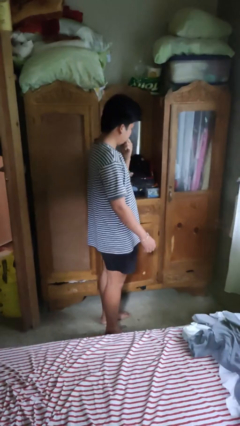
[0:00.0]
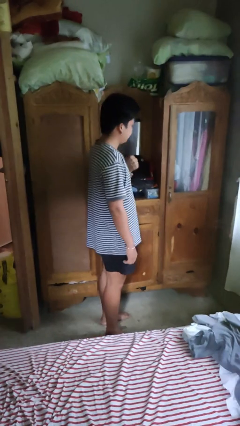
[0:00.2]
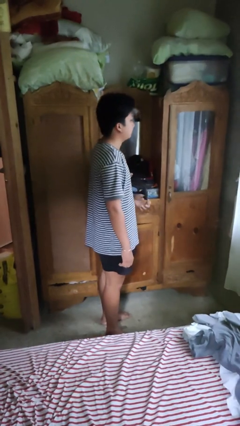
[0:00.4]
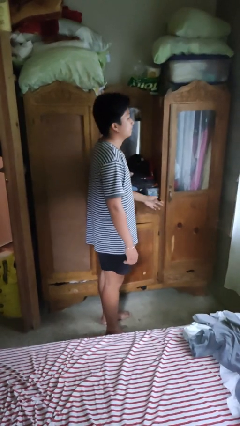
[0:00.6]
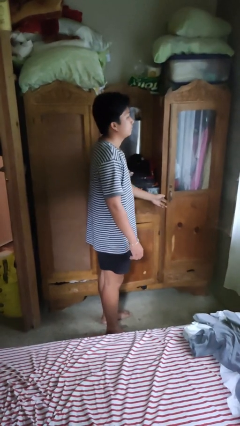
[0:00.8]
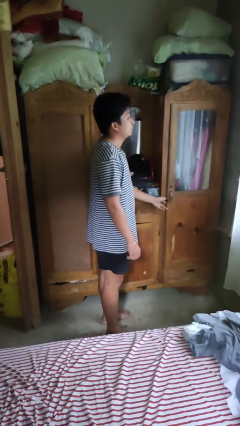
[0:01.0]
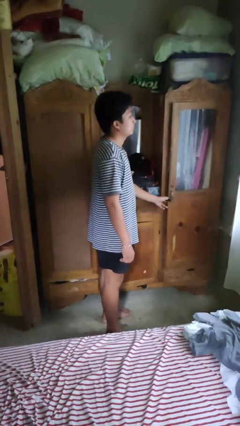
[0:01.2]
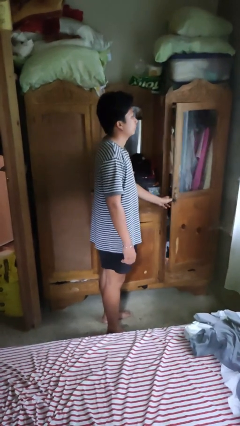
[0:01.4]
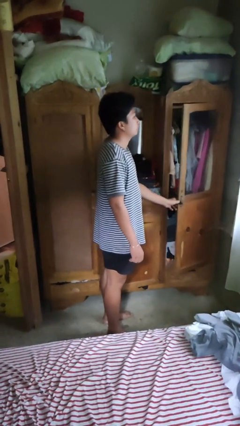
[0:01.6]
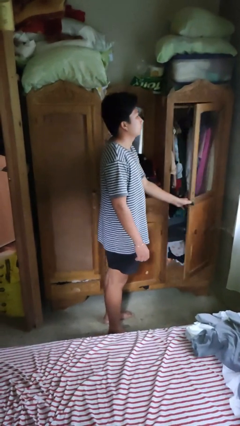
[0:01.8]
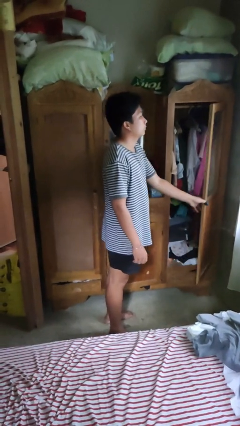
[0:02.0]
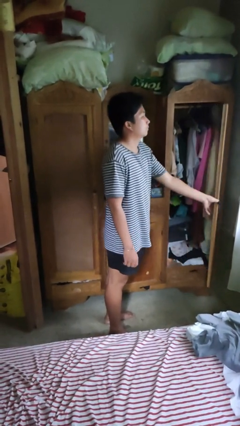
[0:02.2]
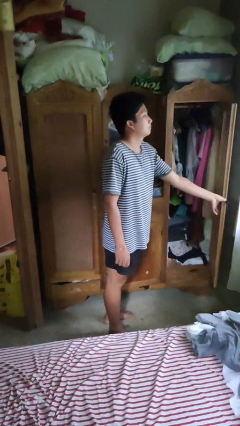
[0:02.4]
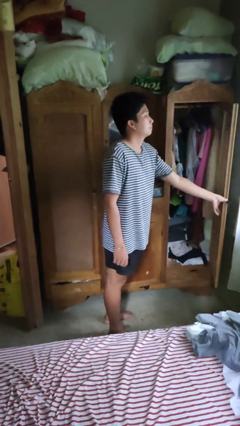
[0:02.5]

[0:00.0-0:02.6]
person opens closet door

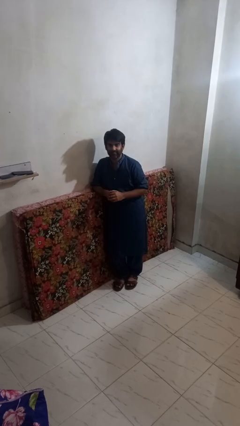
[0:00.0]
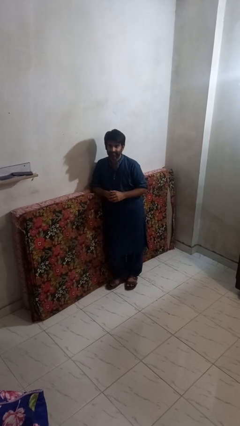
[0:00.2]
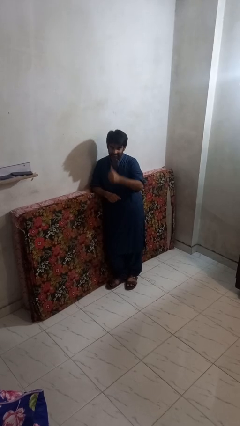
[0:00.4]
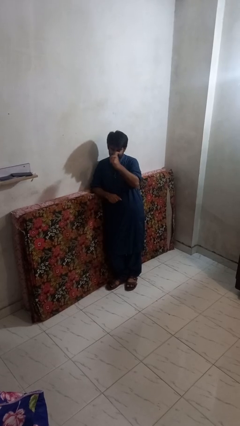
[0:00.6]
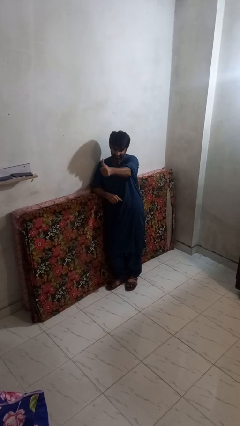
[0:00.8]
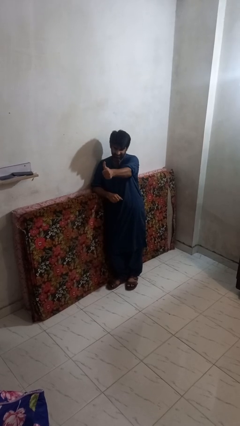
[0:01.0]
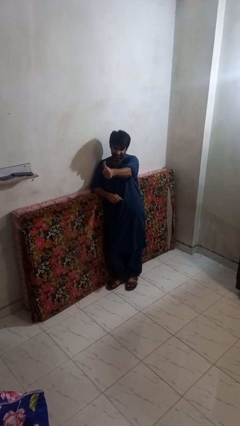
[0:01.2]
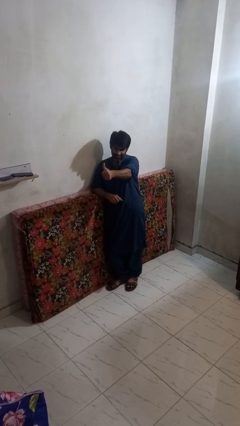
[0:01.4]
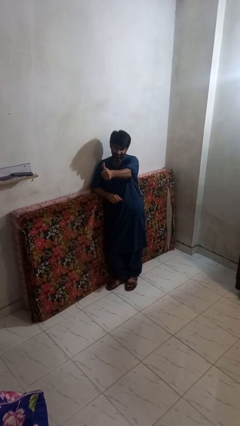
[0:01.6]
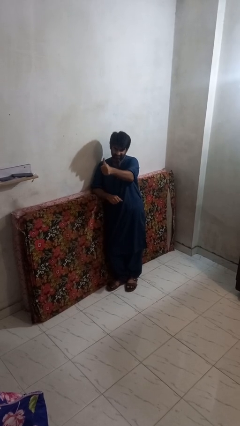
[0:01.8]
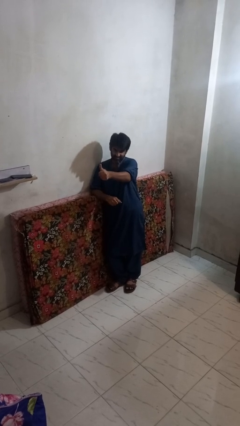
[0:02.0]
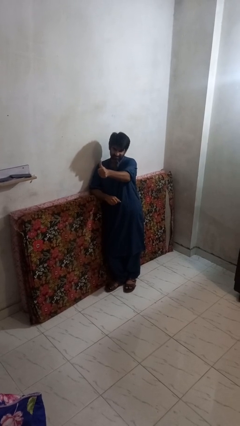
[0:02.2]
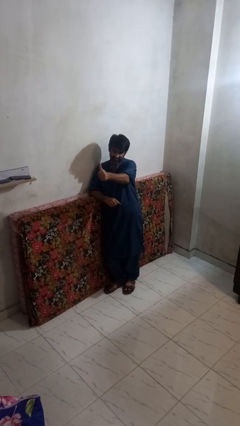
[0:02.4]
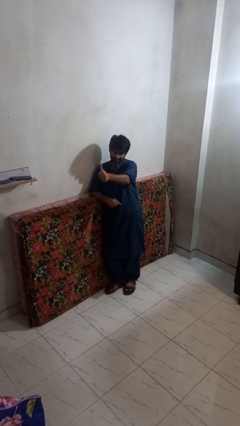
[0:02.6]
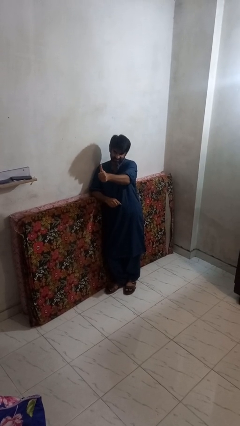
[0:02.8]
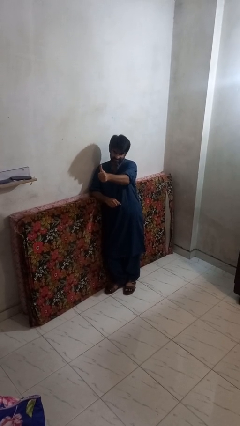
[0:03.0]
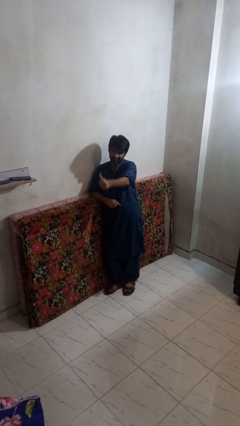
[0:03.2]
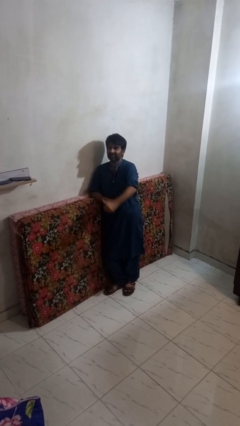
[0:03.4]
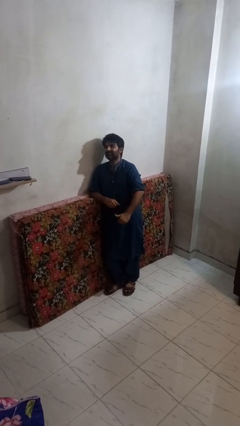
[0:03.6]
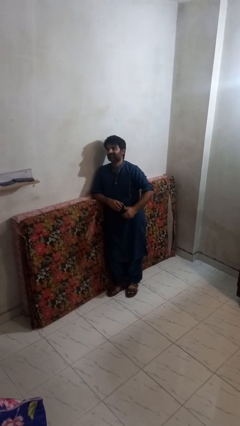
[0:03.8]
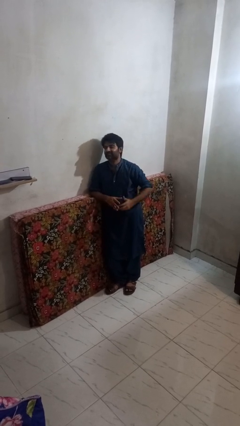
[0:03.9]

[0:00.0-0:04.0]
person gestures thumbs up

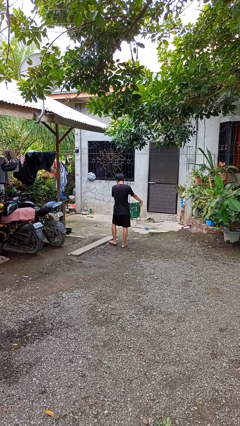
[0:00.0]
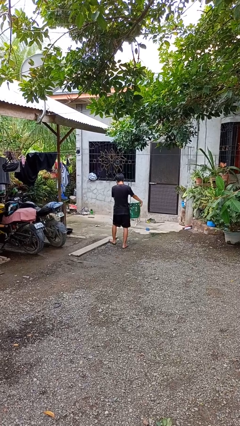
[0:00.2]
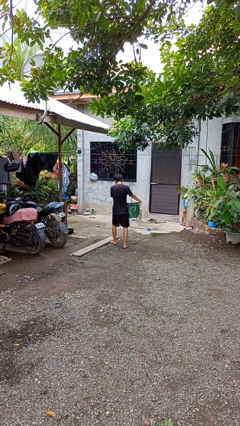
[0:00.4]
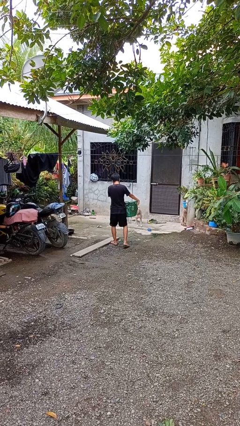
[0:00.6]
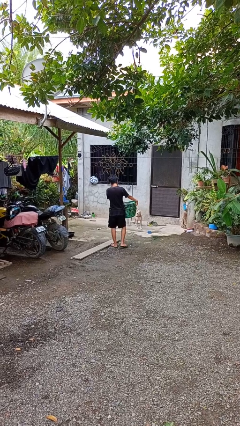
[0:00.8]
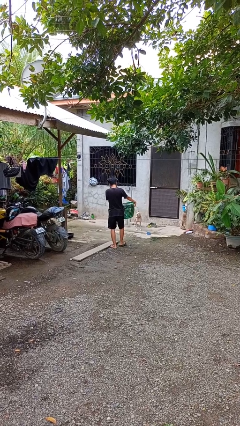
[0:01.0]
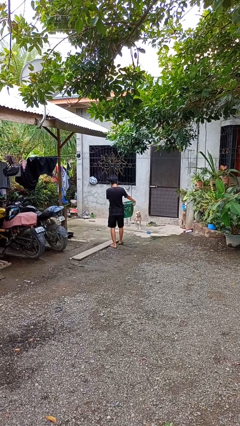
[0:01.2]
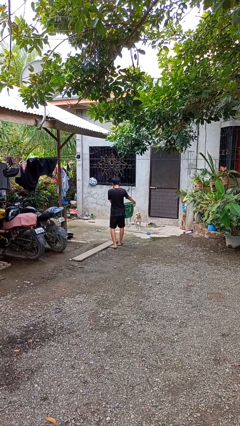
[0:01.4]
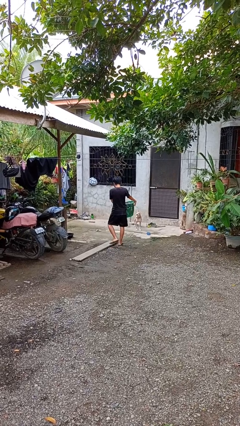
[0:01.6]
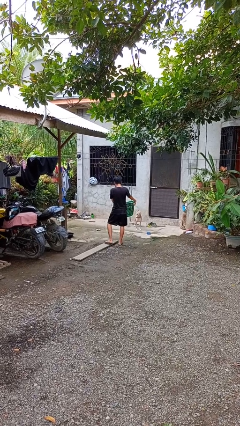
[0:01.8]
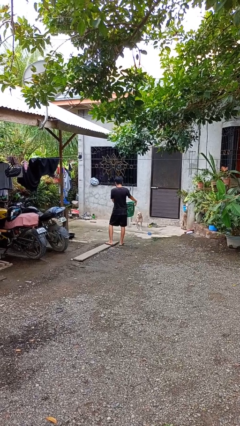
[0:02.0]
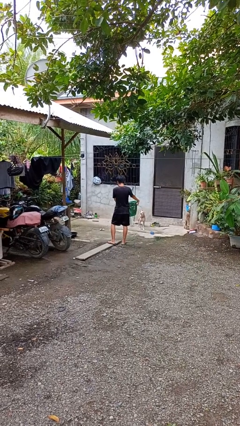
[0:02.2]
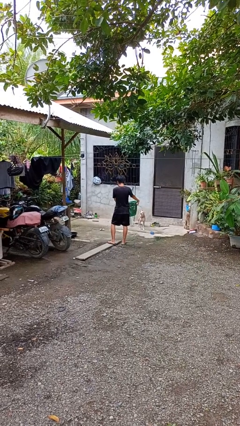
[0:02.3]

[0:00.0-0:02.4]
person carries laundry basket

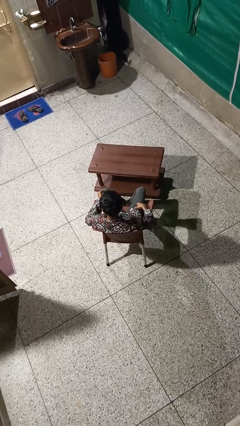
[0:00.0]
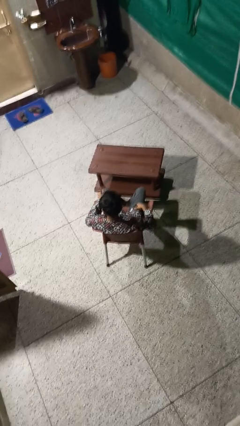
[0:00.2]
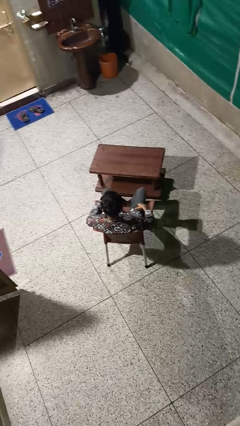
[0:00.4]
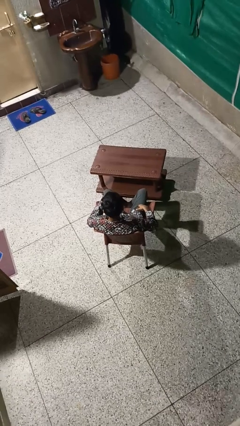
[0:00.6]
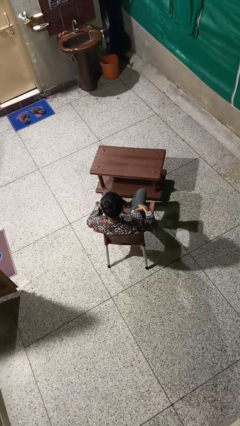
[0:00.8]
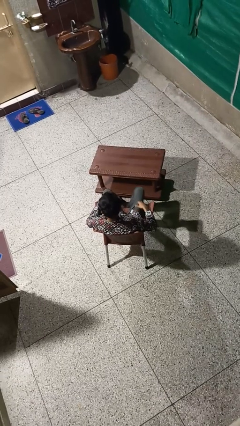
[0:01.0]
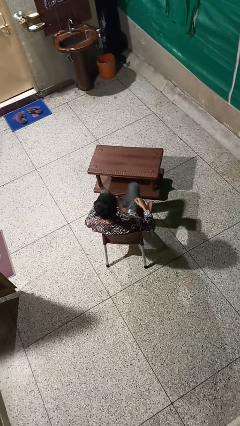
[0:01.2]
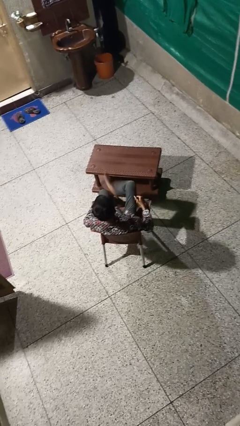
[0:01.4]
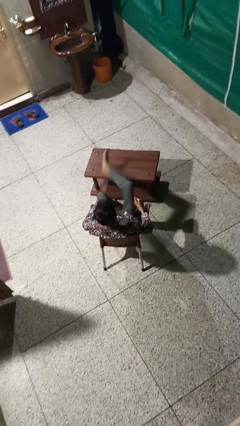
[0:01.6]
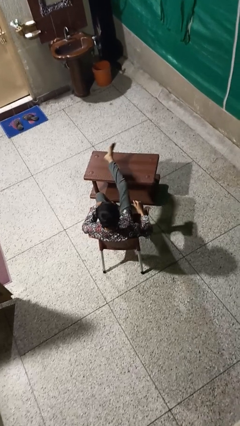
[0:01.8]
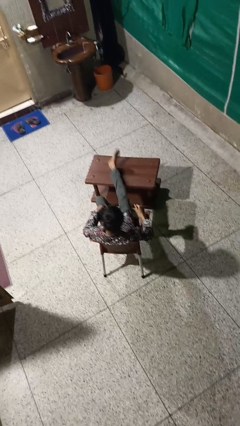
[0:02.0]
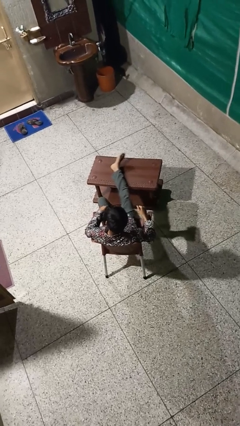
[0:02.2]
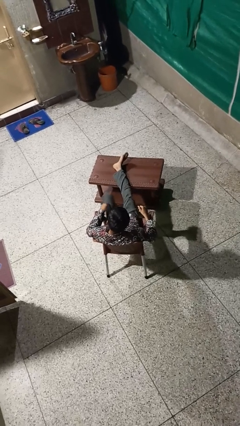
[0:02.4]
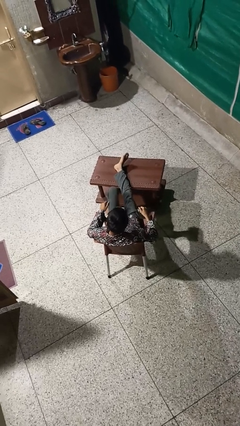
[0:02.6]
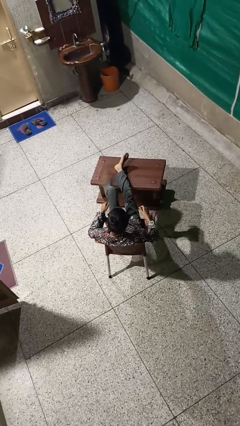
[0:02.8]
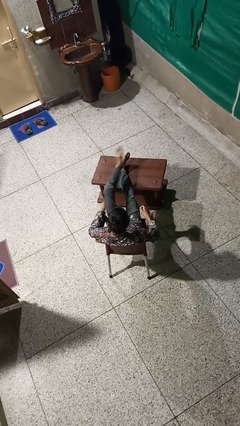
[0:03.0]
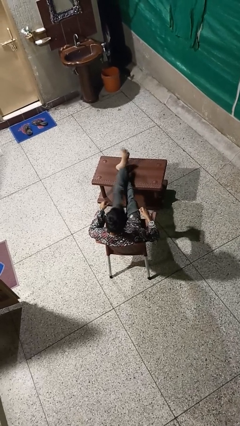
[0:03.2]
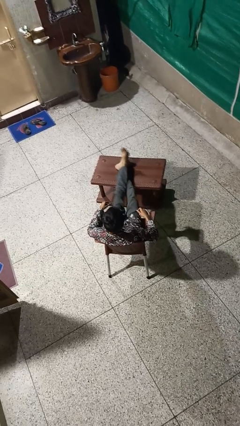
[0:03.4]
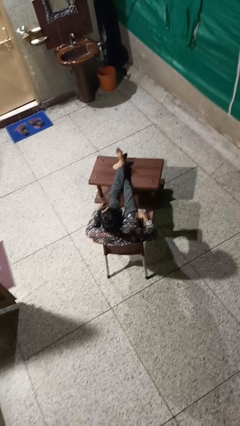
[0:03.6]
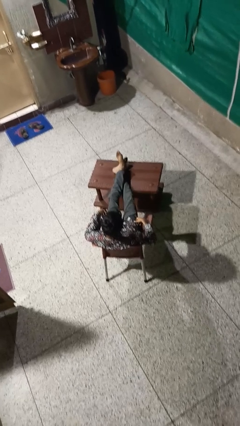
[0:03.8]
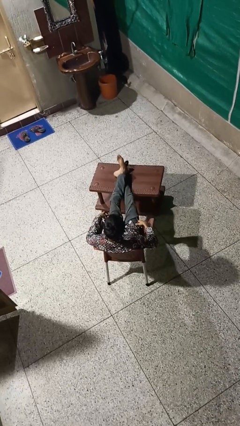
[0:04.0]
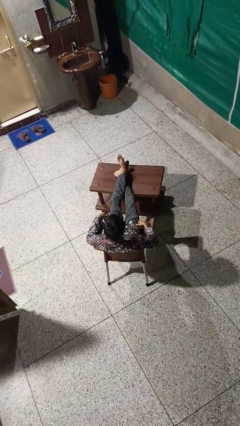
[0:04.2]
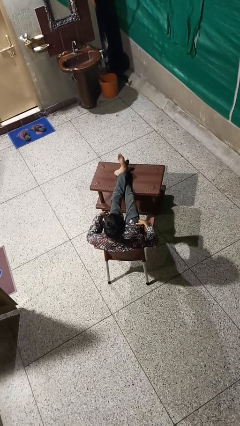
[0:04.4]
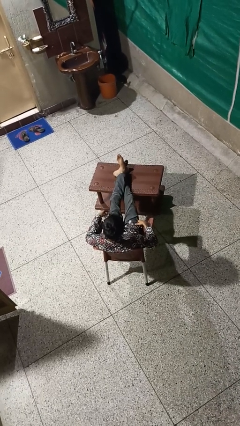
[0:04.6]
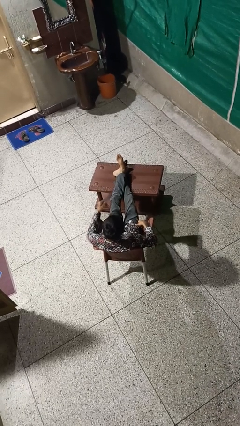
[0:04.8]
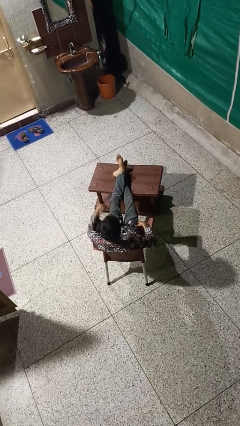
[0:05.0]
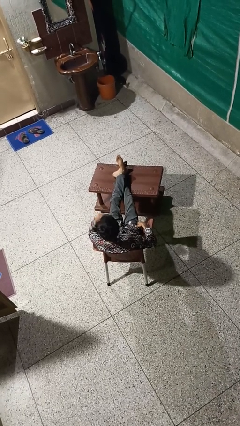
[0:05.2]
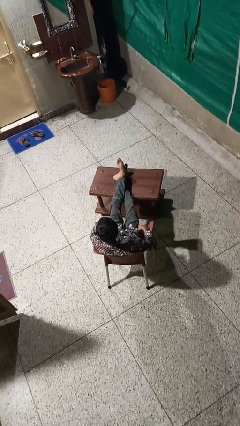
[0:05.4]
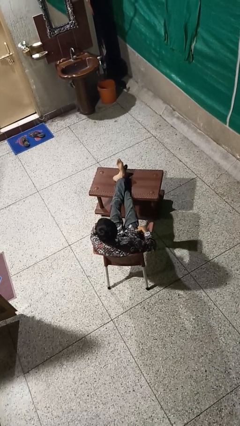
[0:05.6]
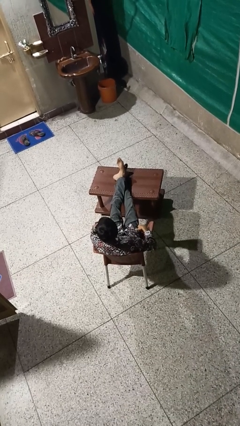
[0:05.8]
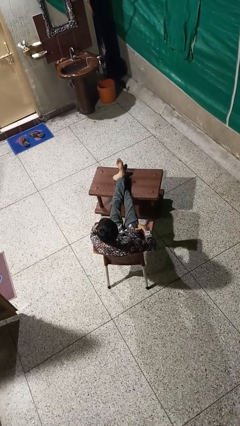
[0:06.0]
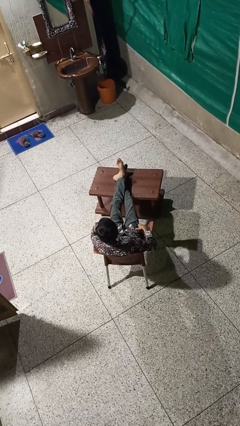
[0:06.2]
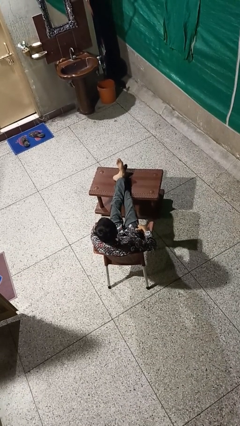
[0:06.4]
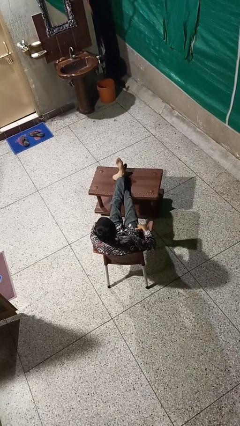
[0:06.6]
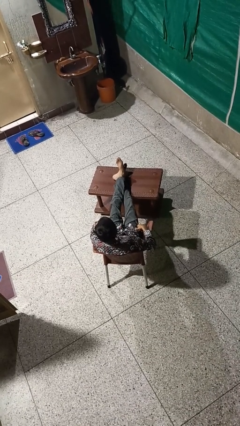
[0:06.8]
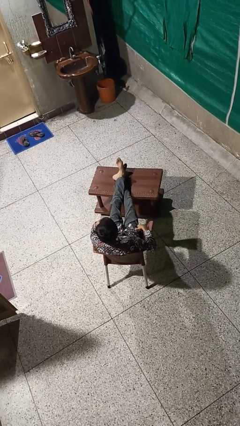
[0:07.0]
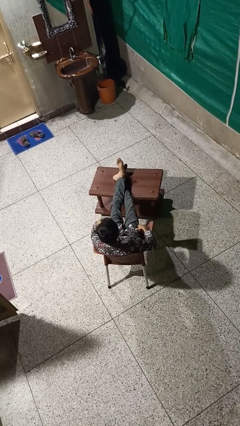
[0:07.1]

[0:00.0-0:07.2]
person puts feet up

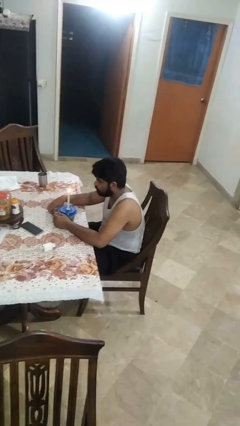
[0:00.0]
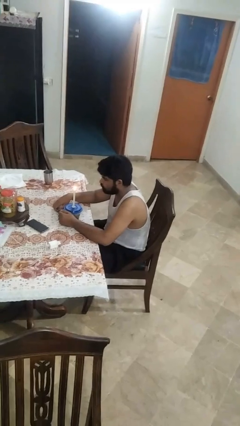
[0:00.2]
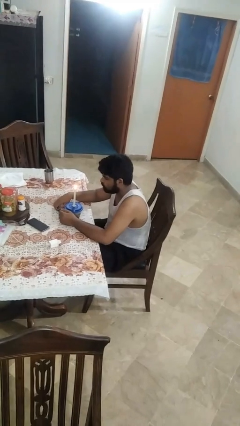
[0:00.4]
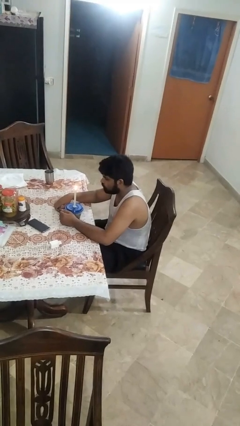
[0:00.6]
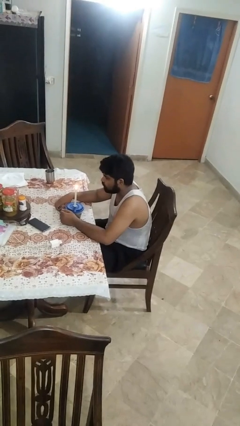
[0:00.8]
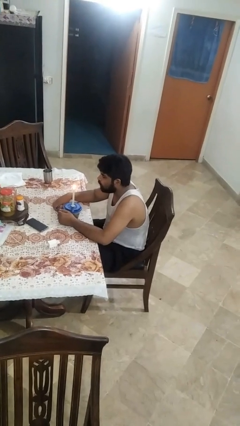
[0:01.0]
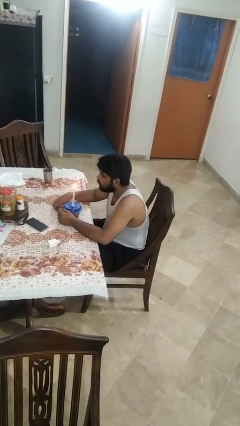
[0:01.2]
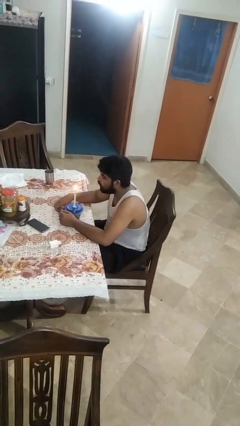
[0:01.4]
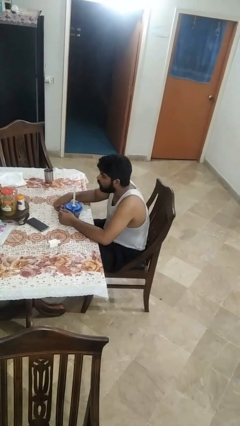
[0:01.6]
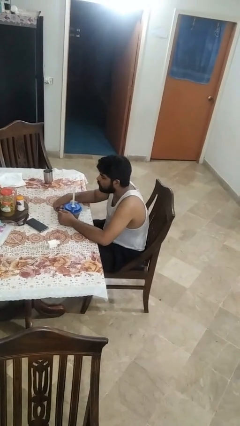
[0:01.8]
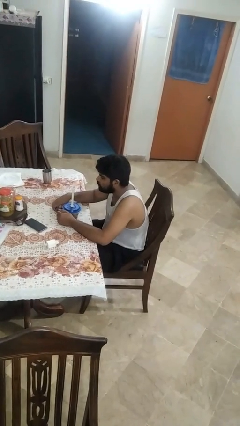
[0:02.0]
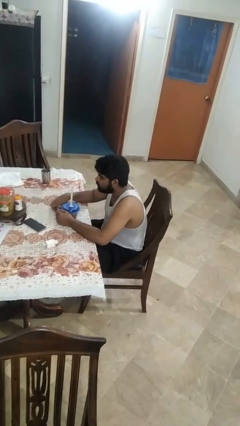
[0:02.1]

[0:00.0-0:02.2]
person extinguishes candle
